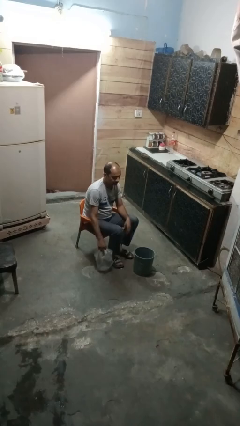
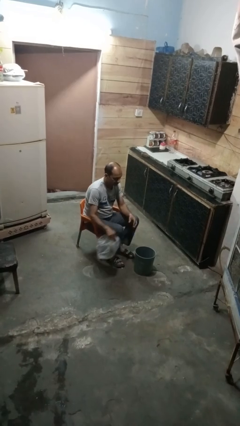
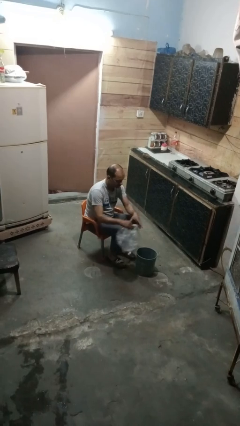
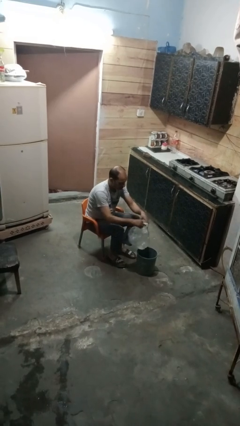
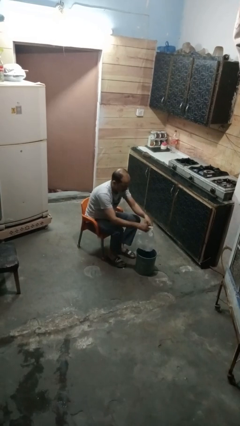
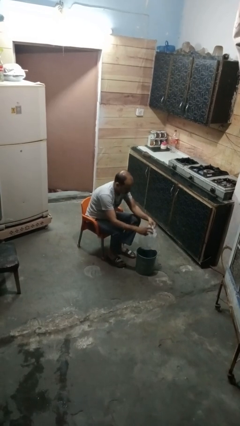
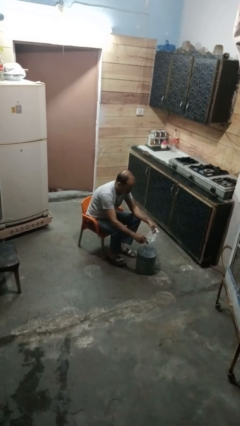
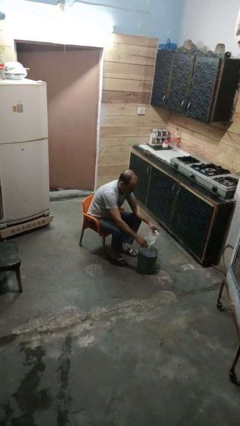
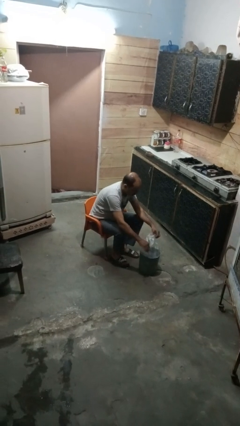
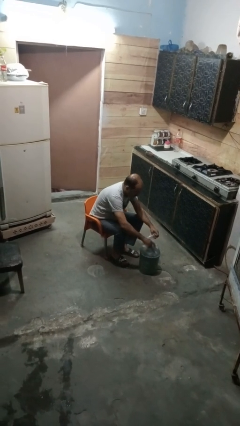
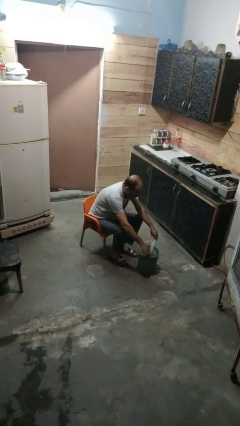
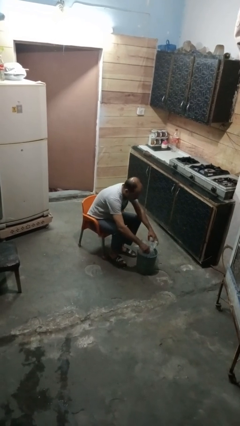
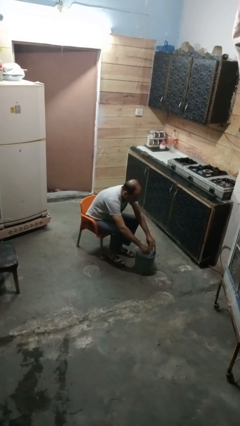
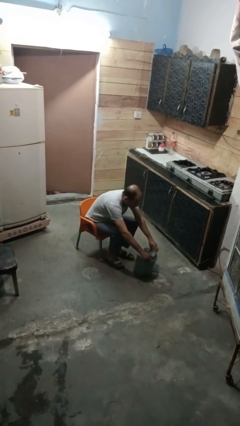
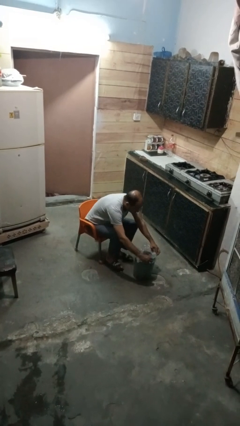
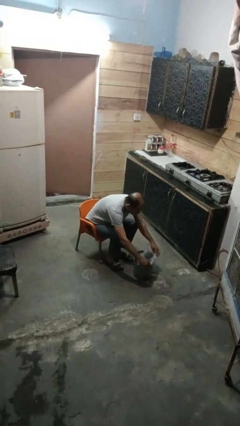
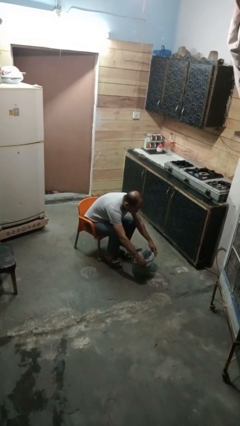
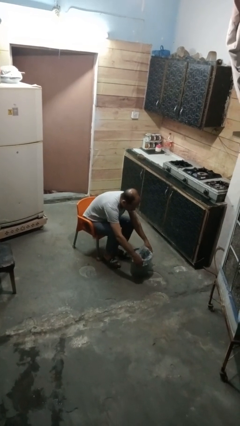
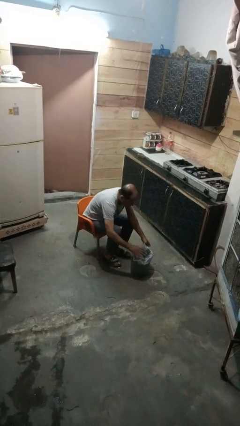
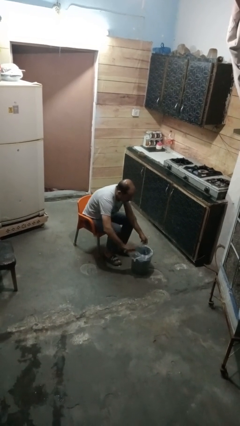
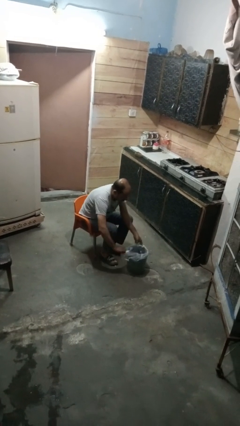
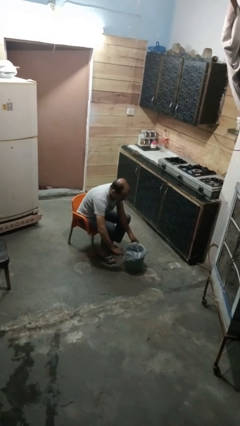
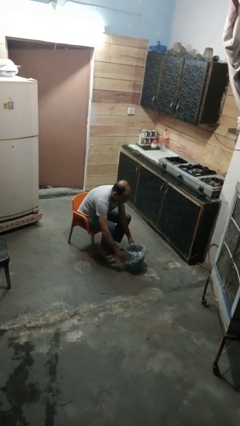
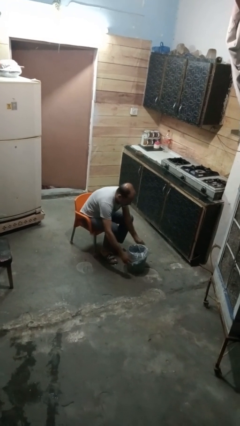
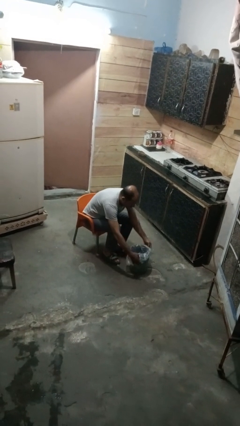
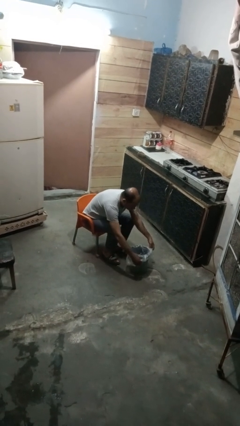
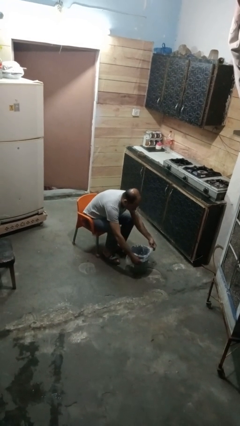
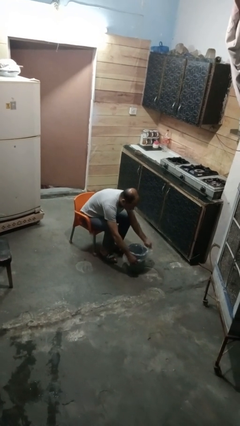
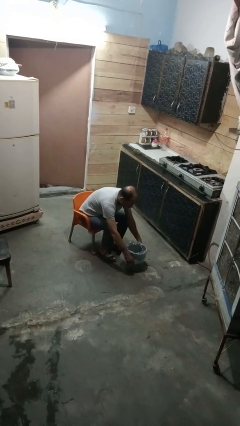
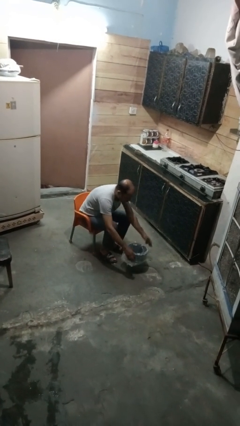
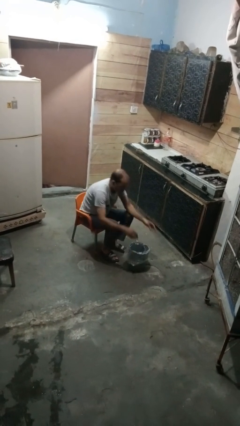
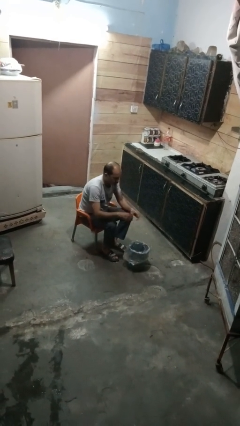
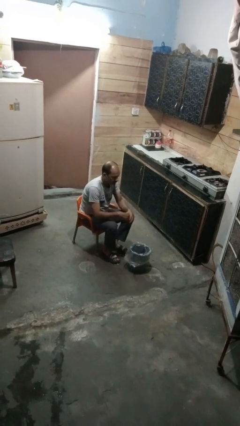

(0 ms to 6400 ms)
person inserts trashbag into trashcan

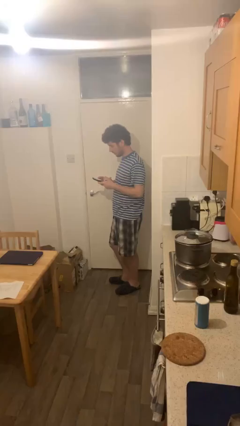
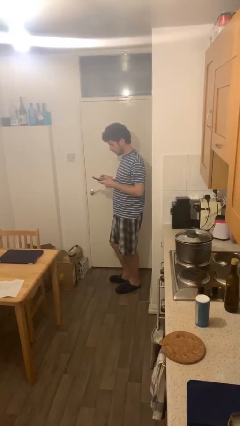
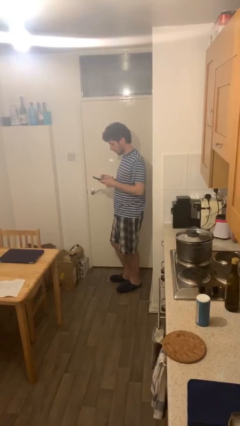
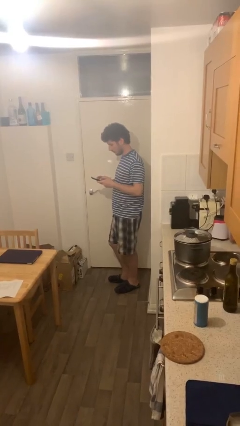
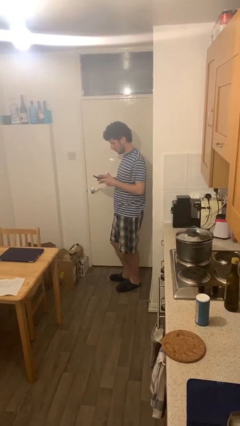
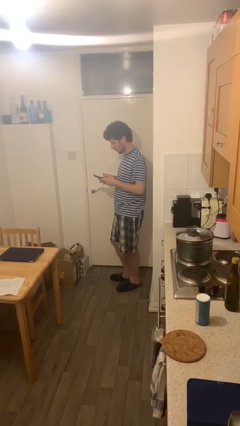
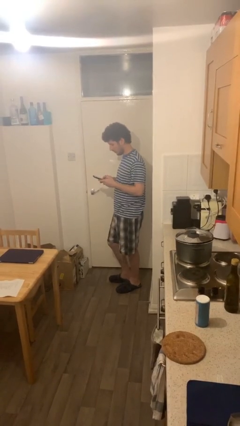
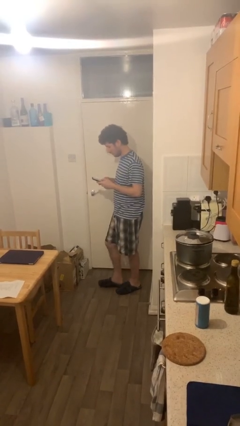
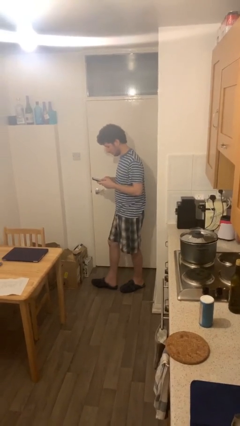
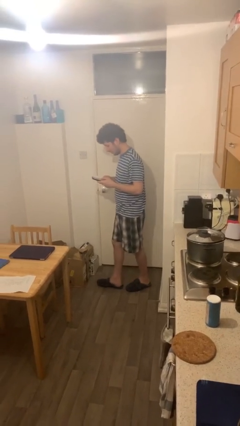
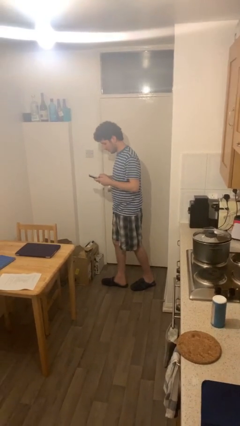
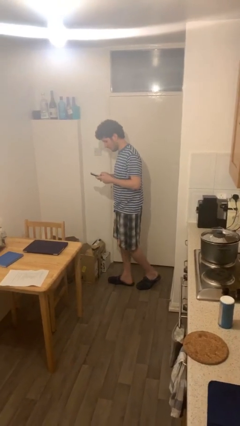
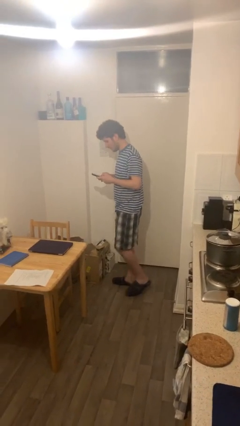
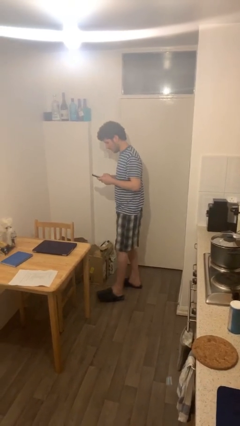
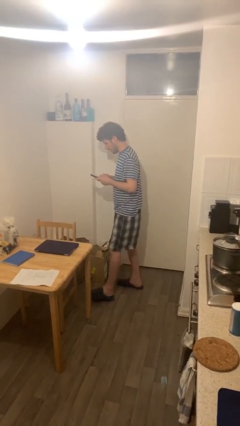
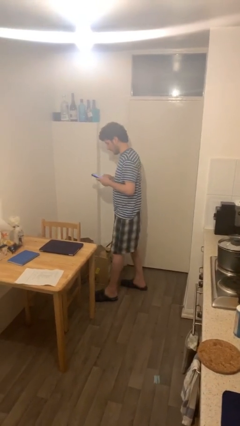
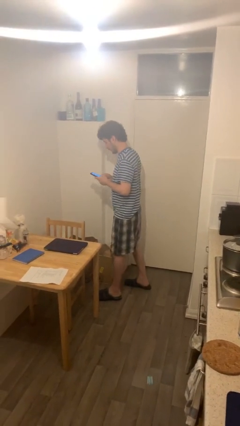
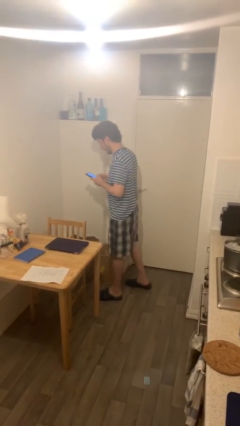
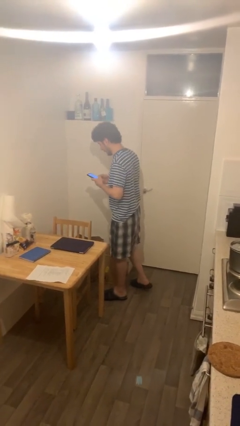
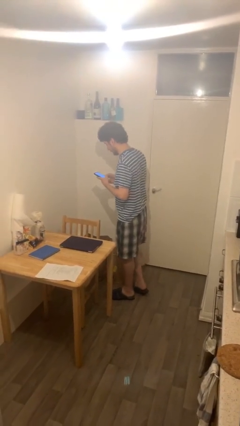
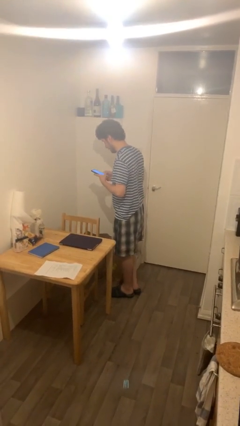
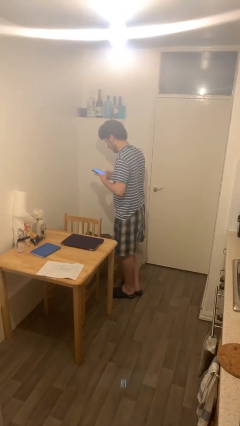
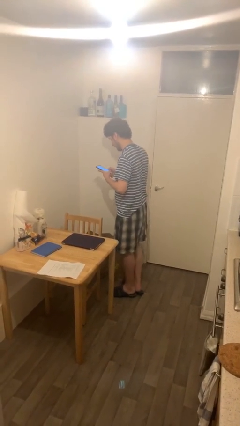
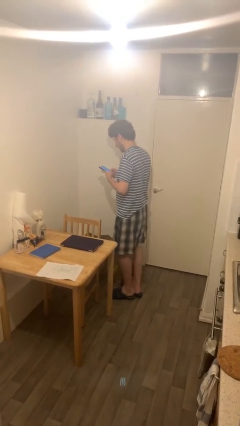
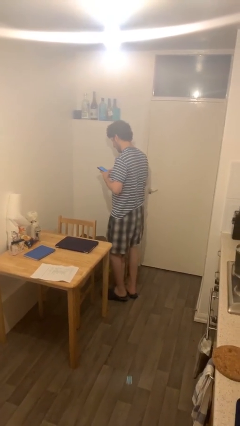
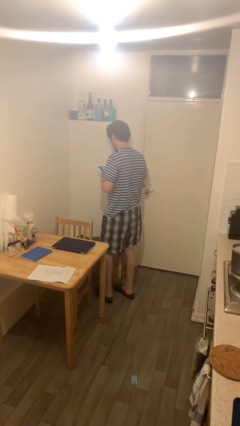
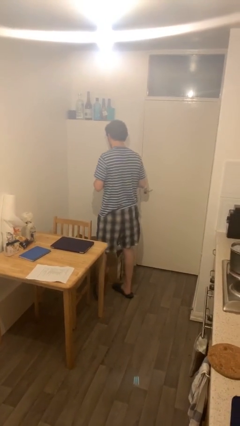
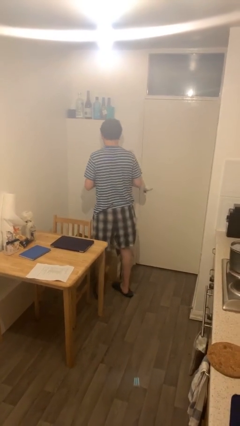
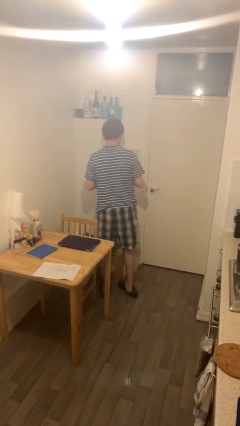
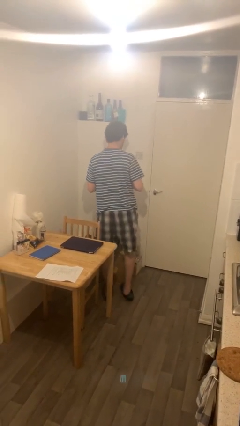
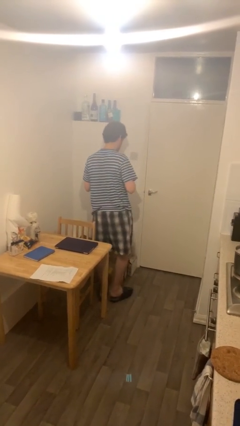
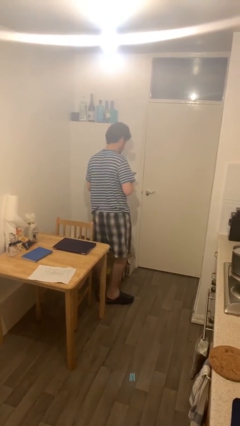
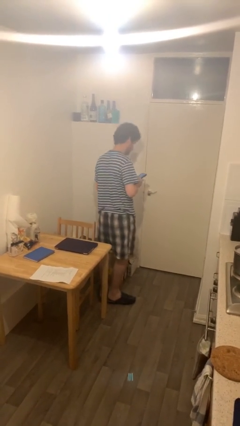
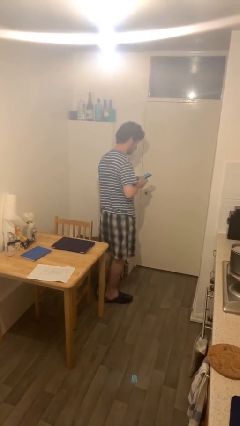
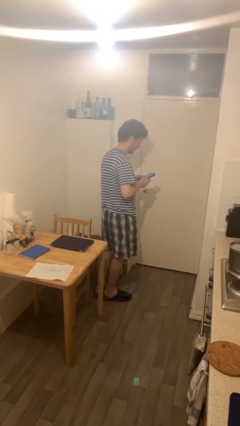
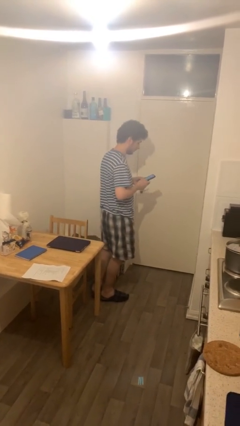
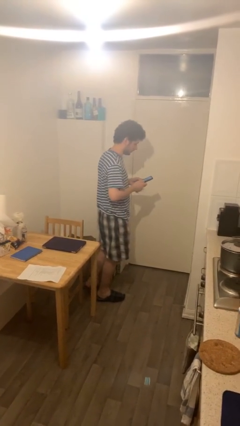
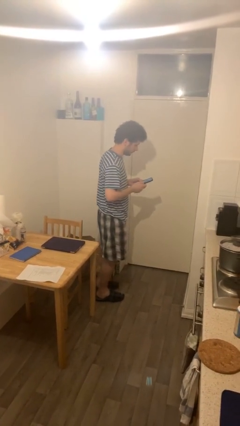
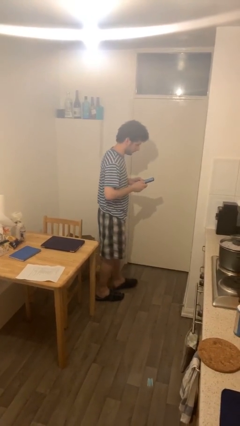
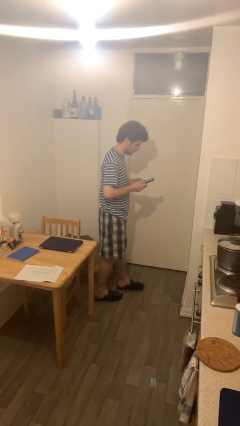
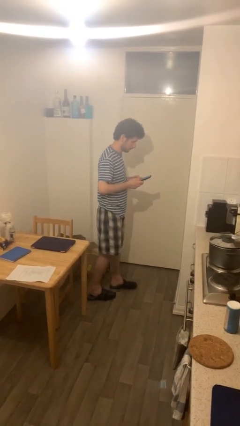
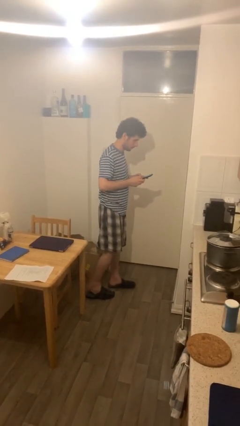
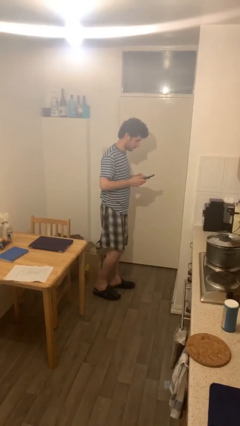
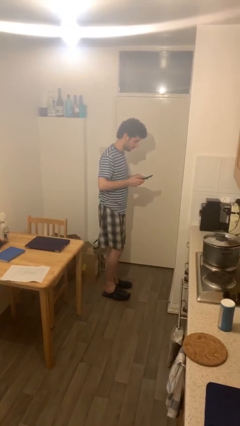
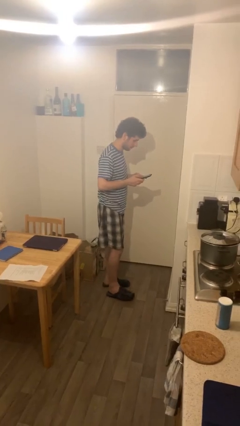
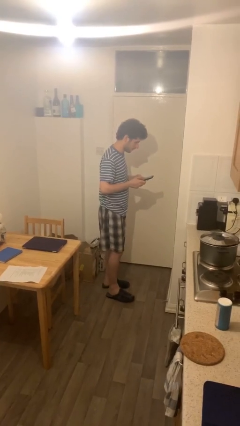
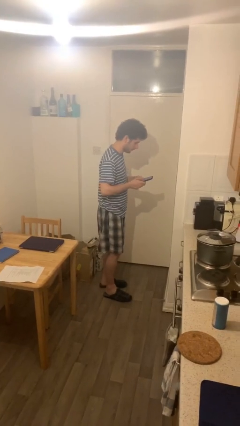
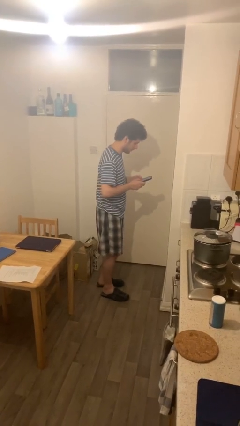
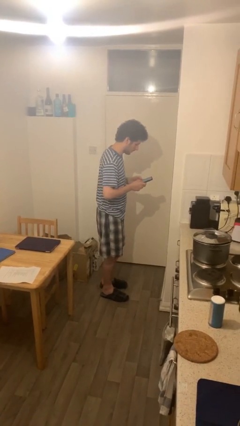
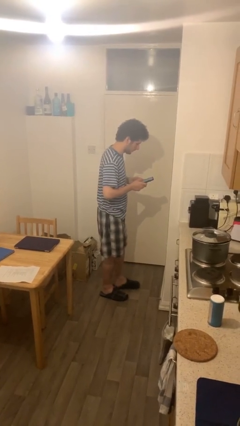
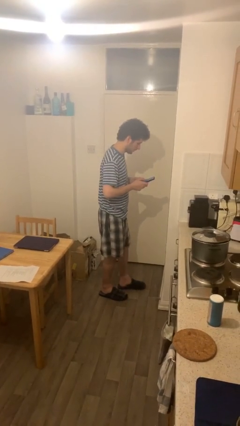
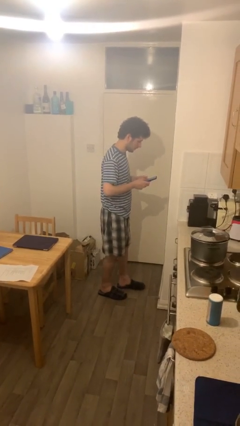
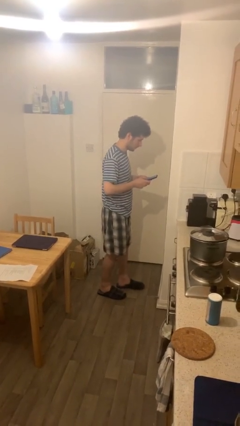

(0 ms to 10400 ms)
person texts on phone

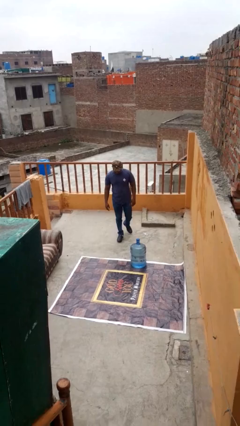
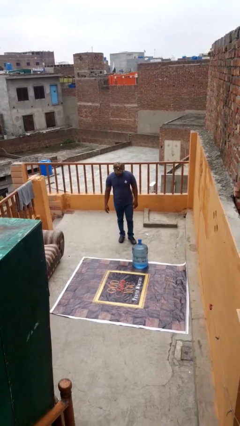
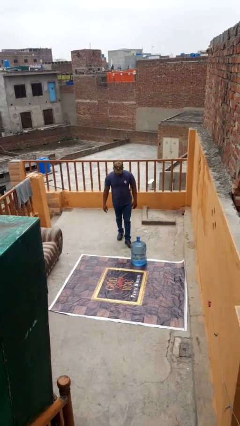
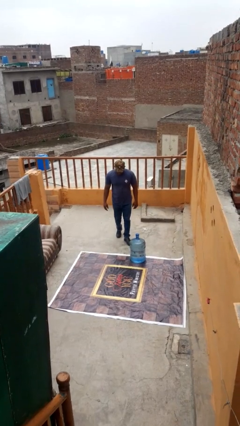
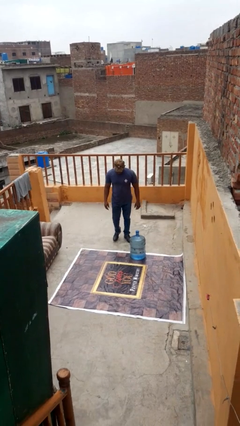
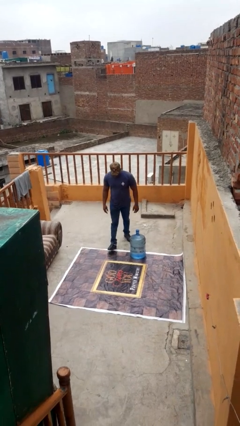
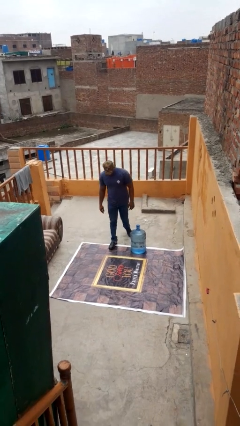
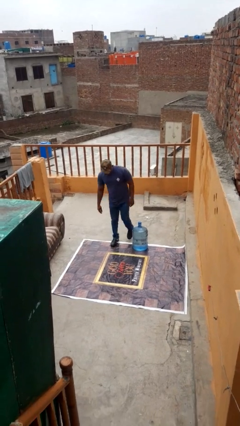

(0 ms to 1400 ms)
person trips on object on floor

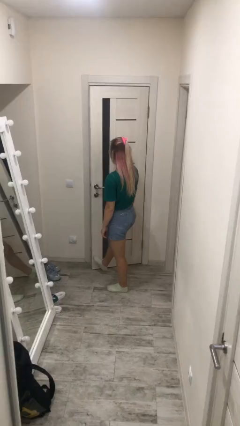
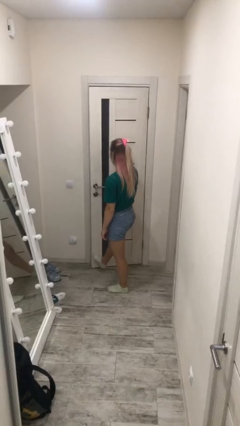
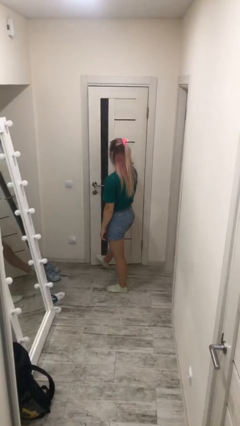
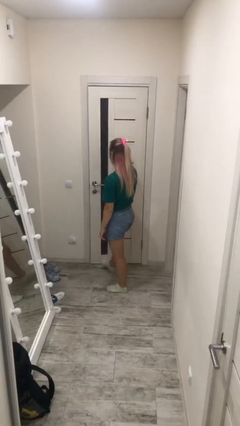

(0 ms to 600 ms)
person closes door with foot
